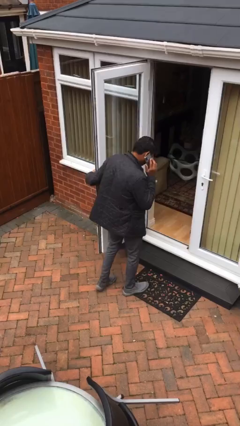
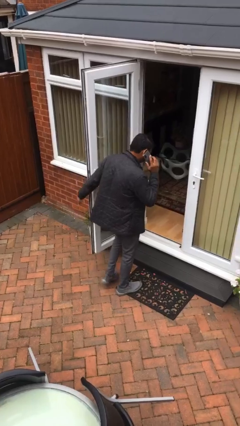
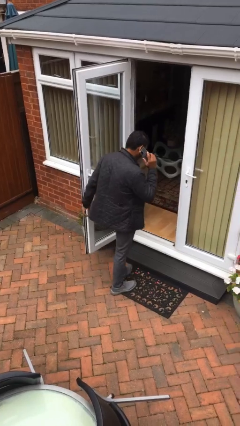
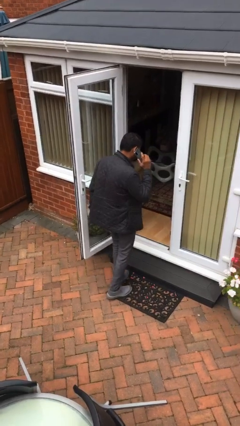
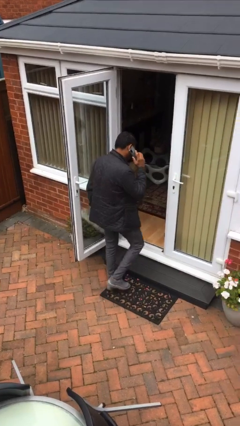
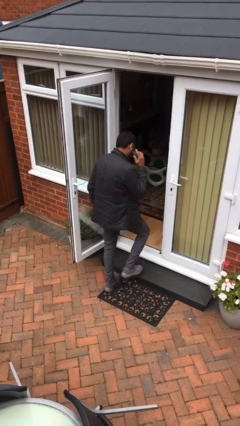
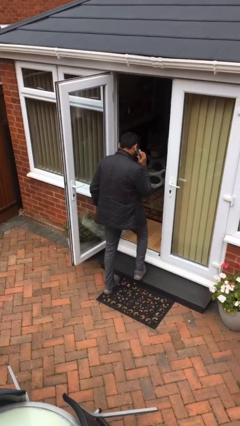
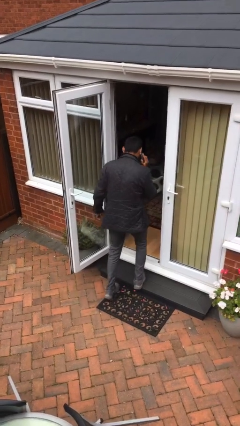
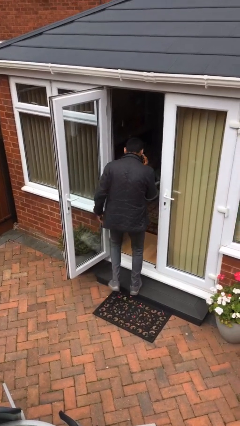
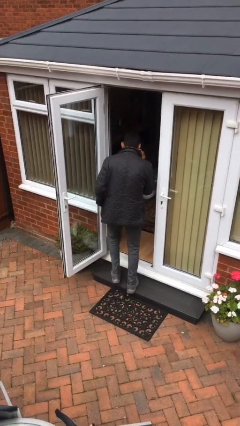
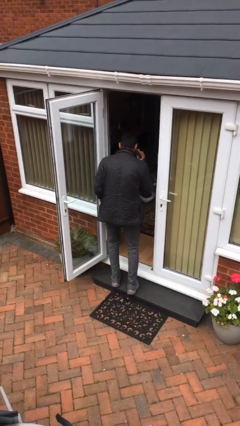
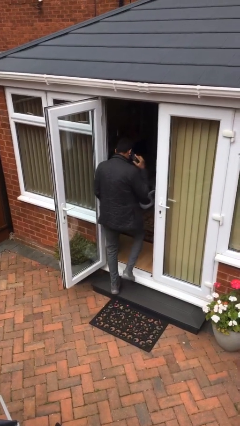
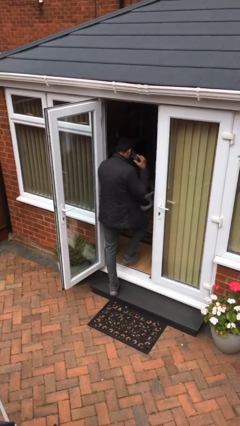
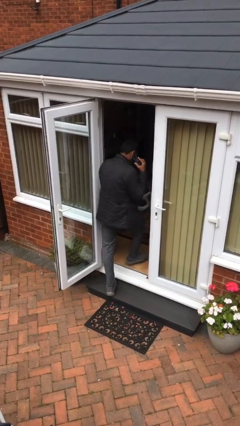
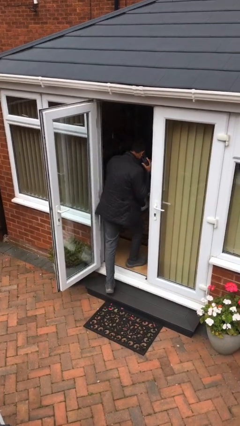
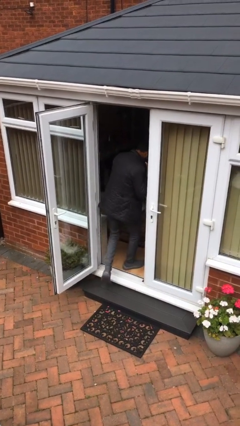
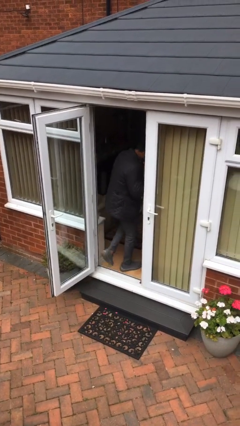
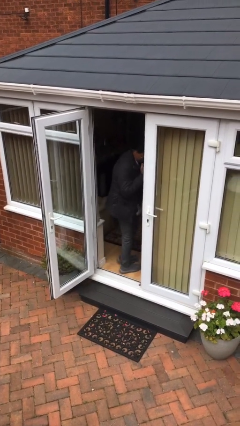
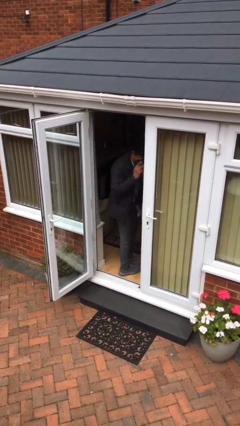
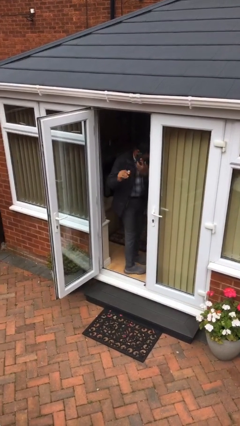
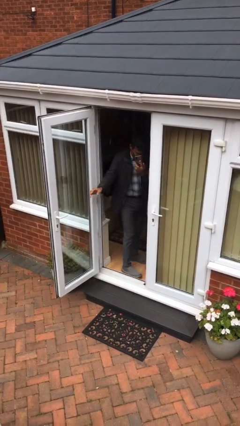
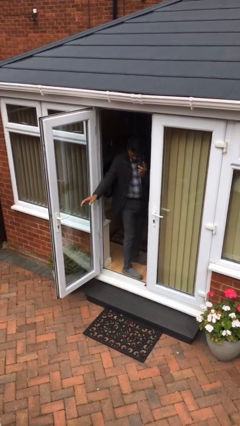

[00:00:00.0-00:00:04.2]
person exits scene through structure

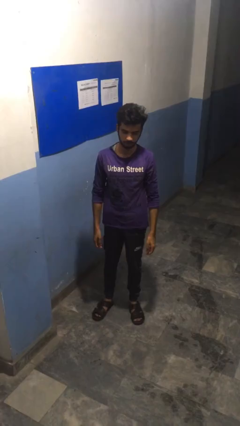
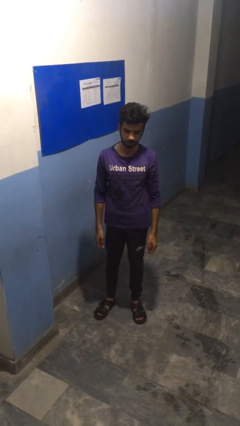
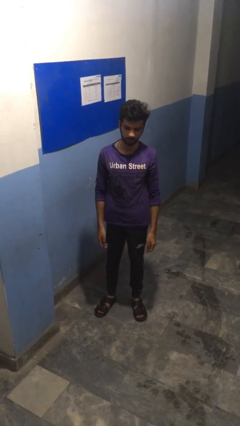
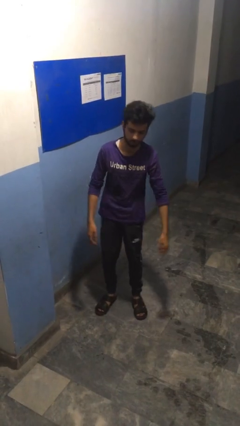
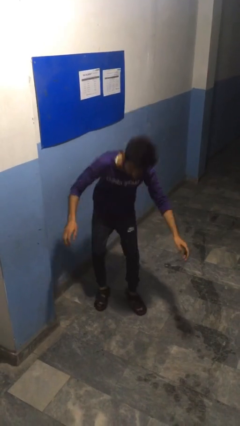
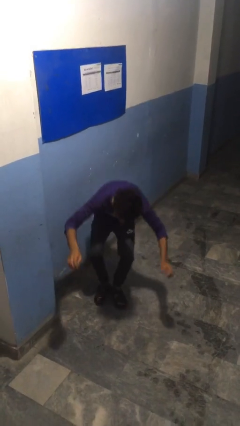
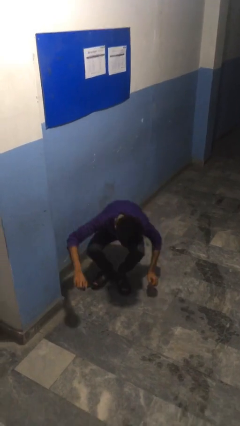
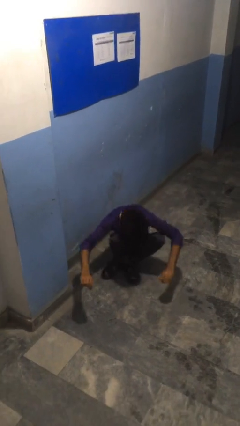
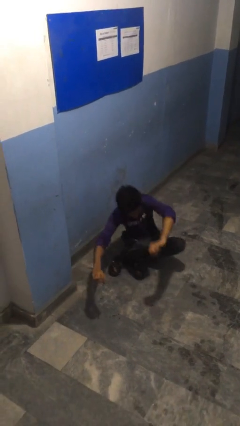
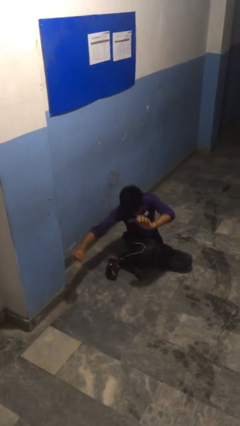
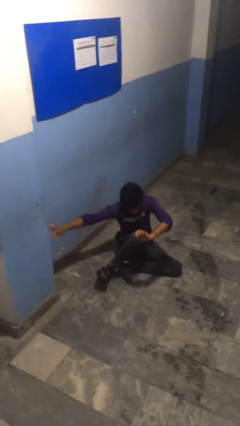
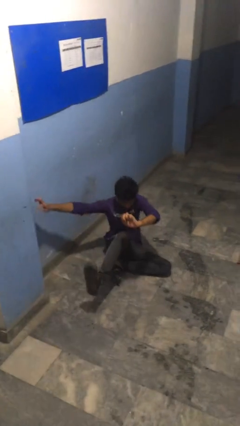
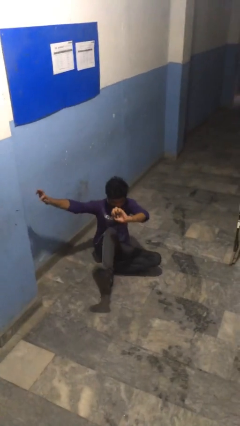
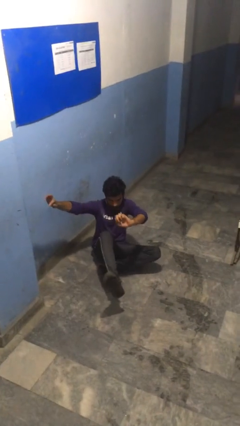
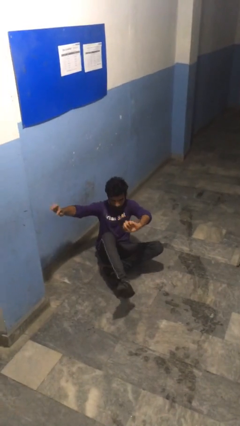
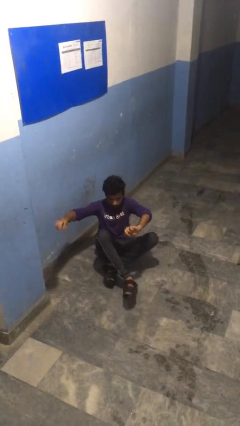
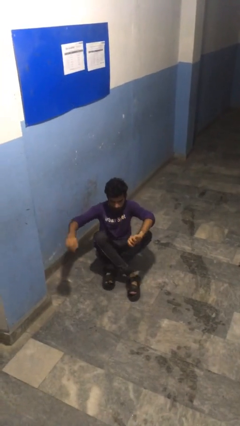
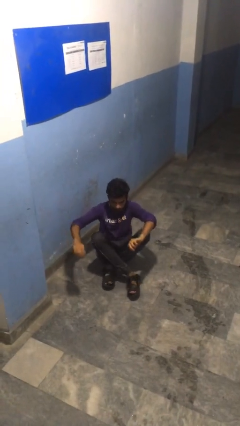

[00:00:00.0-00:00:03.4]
person falls while standing

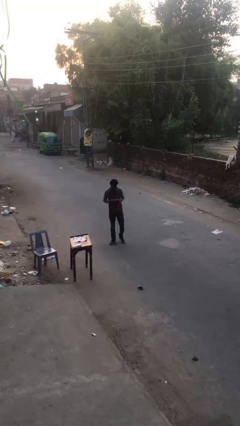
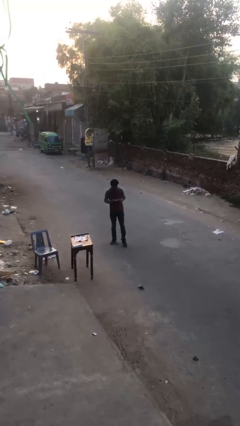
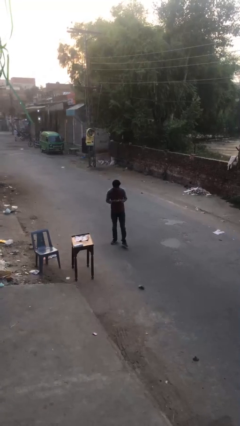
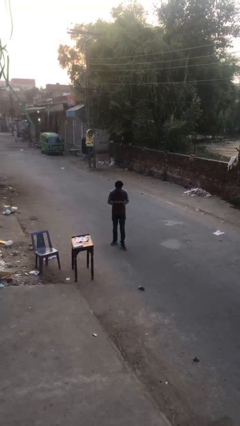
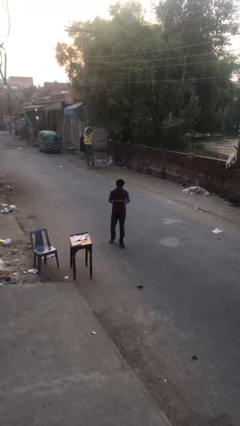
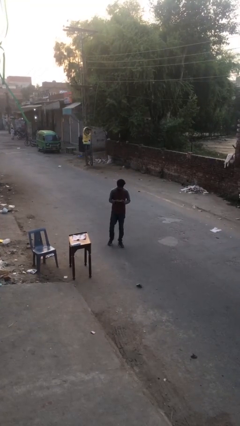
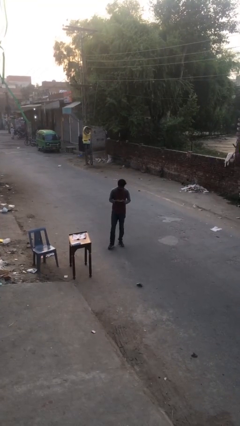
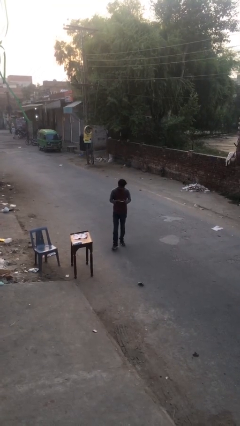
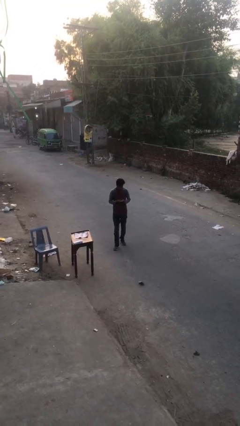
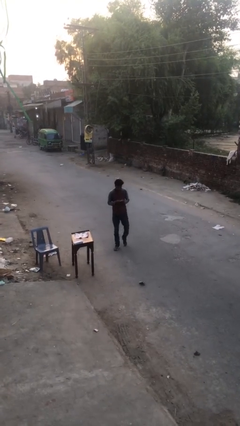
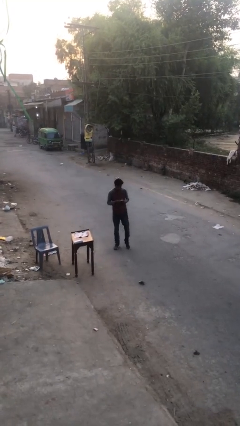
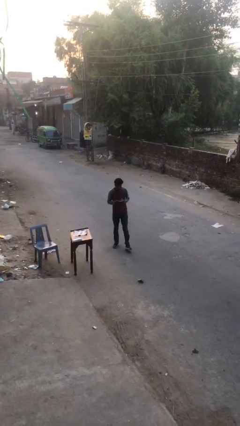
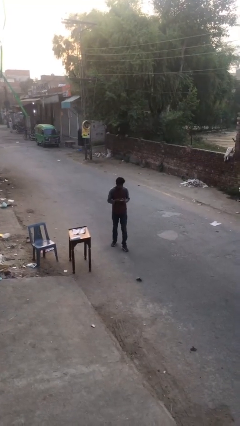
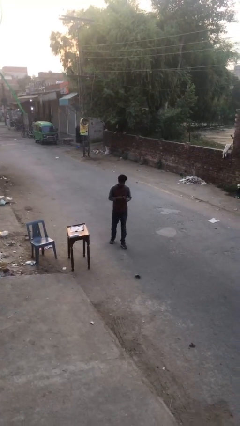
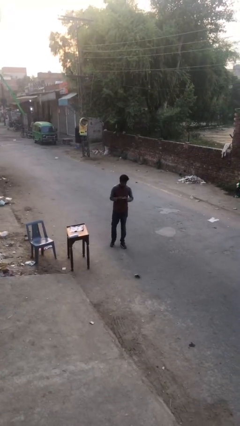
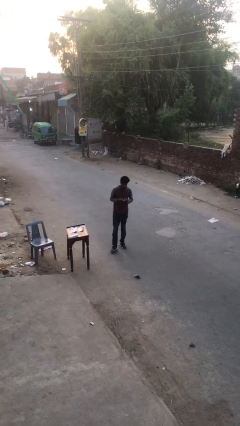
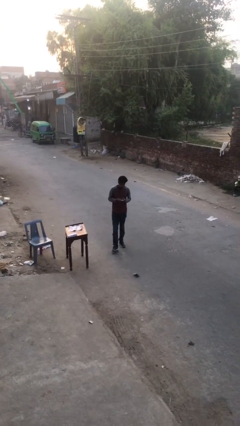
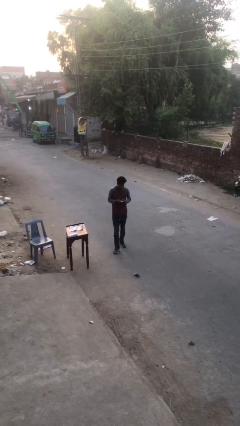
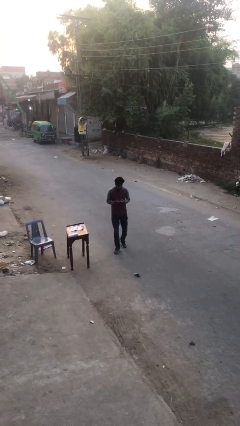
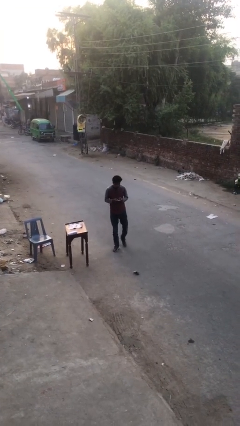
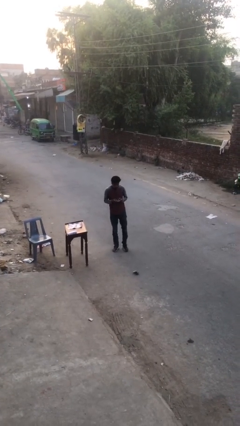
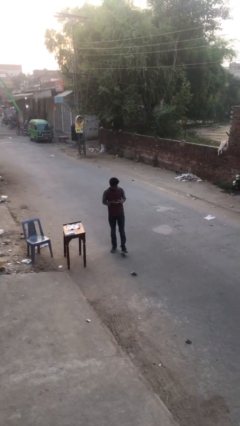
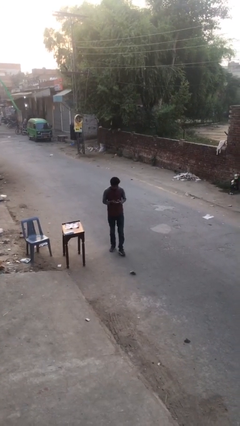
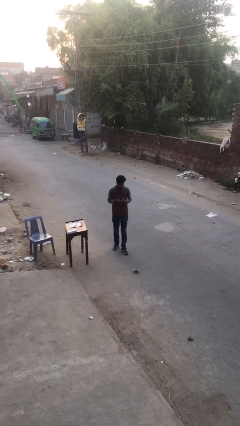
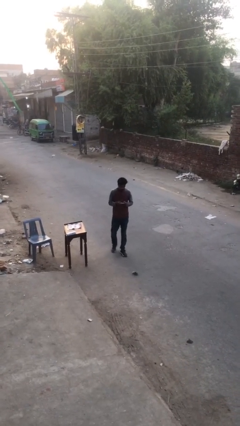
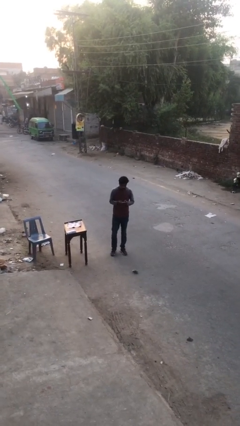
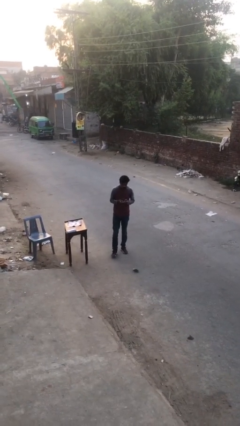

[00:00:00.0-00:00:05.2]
person texts on phone

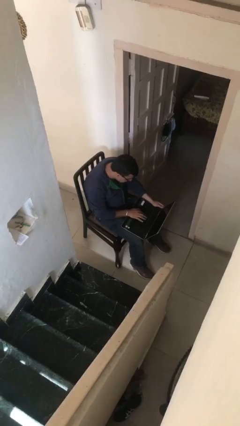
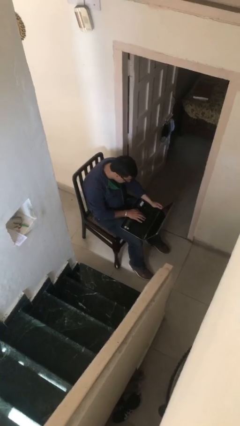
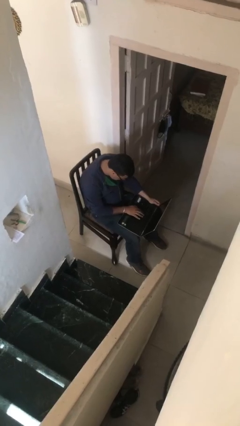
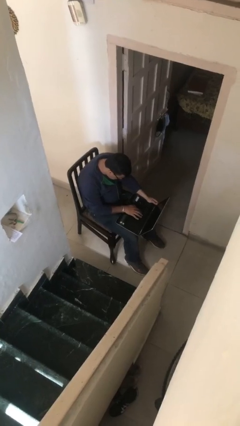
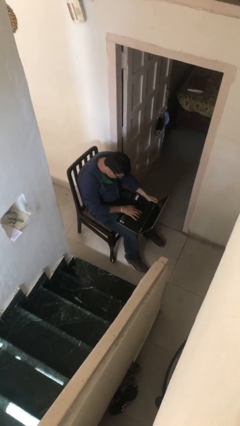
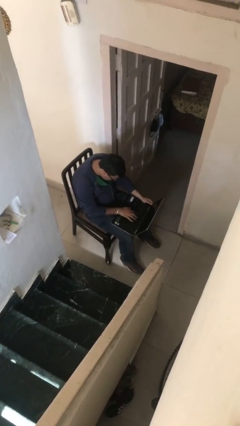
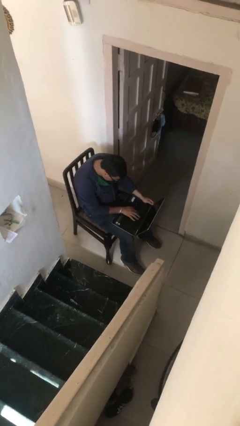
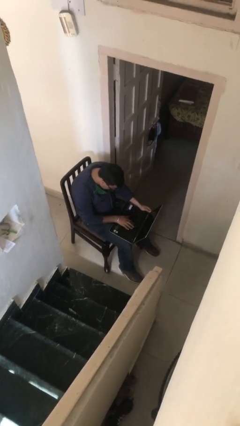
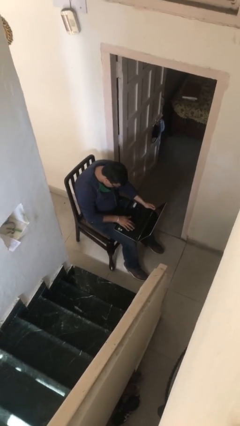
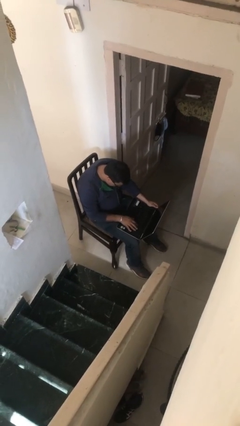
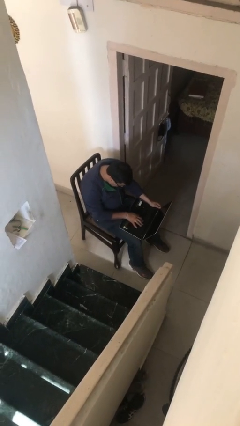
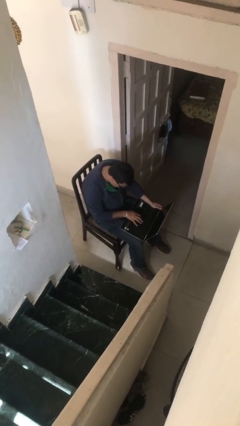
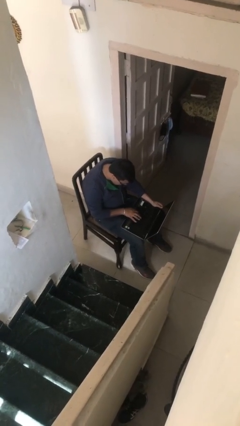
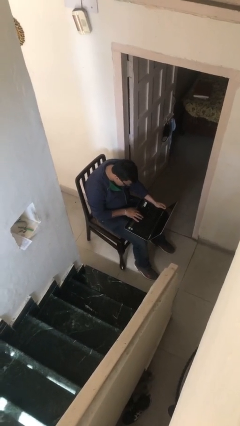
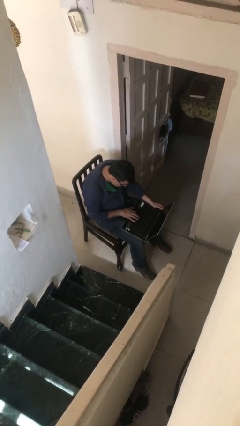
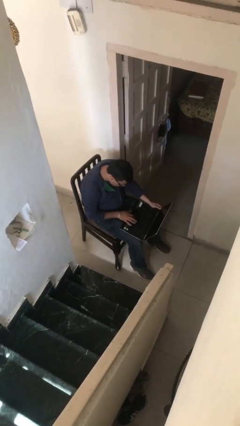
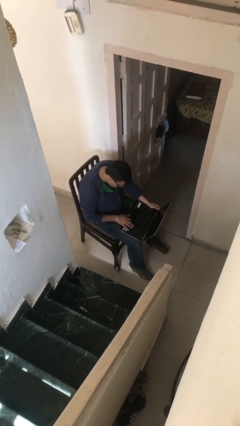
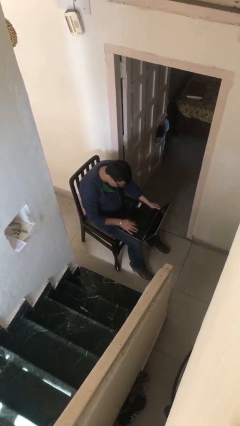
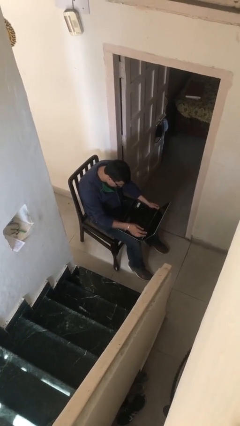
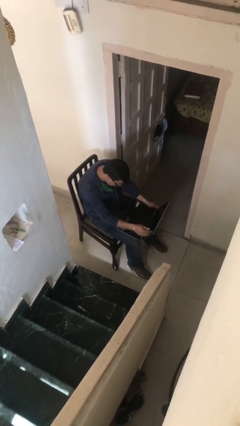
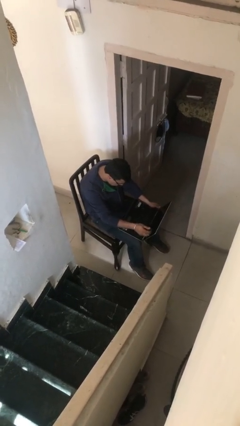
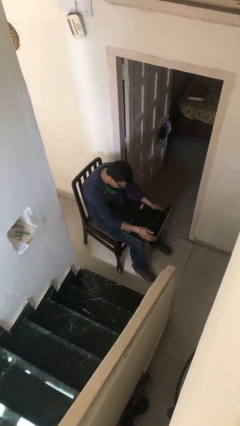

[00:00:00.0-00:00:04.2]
person interacts with laptop

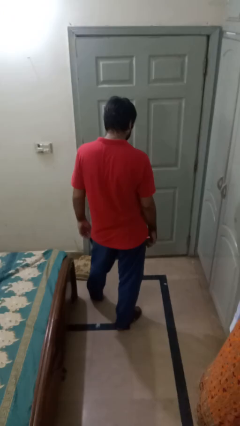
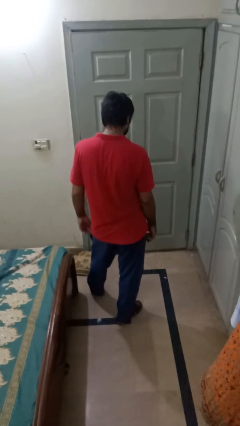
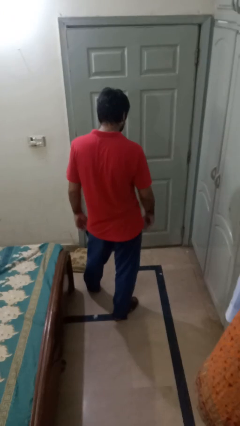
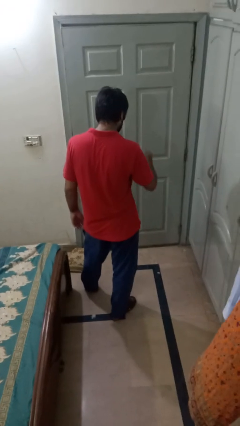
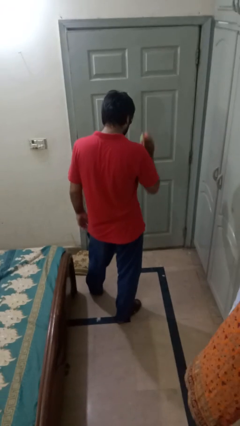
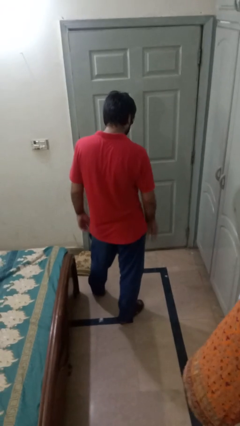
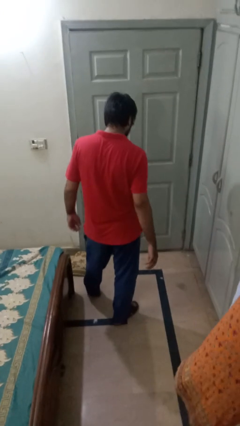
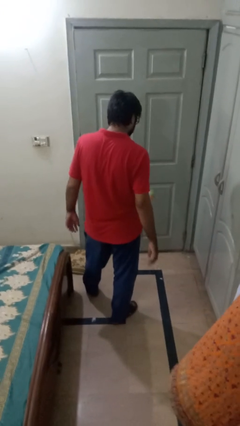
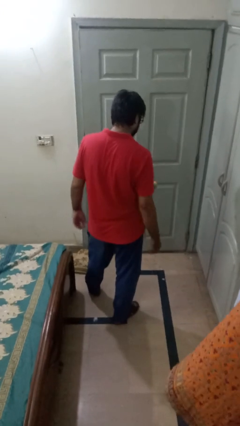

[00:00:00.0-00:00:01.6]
person bounces ball on floor
